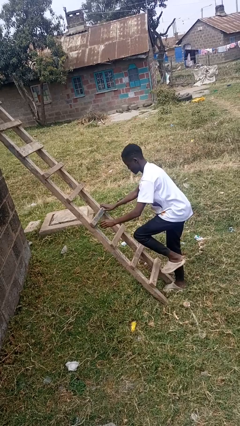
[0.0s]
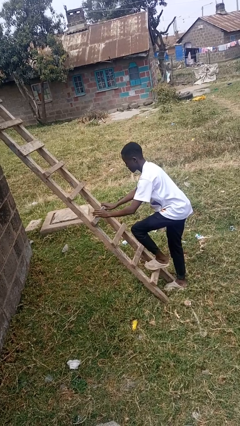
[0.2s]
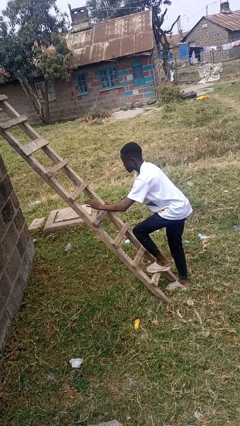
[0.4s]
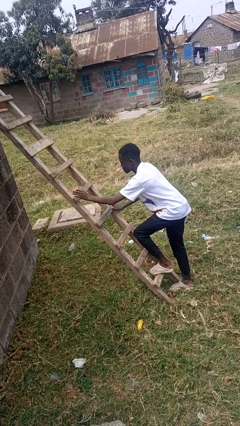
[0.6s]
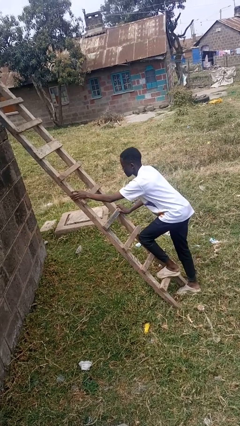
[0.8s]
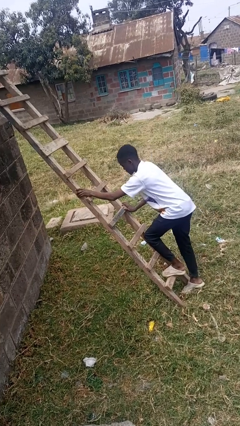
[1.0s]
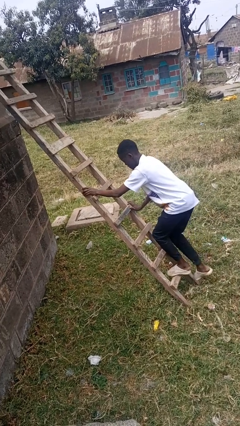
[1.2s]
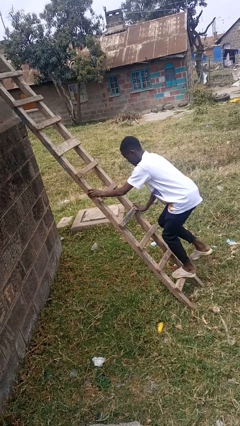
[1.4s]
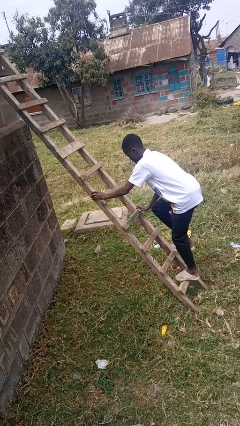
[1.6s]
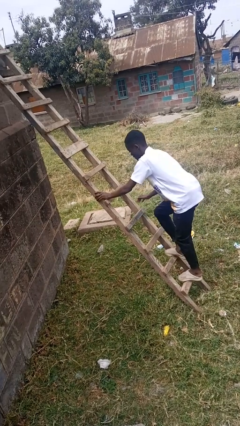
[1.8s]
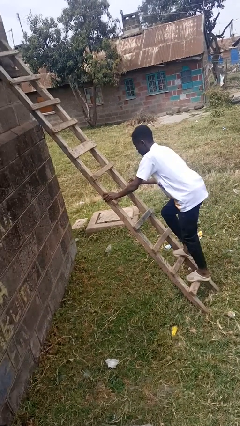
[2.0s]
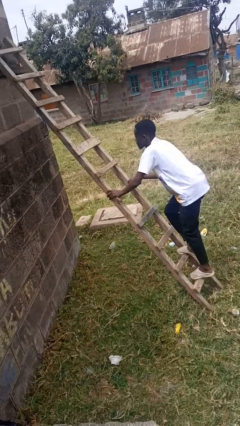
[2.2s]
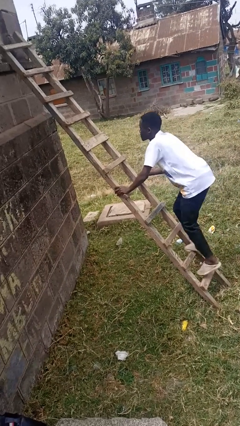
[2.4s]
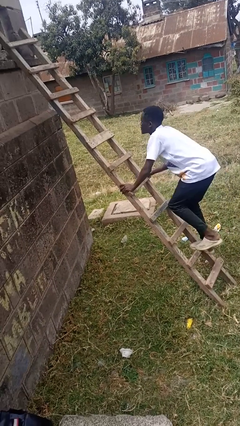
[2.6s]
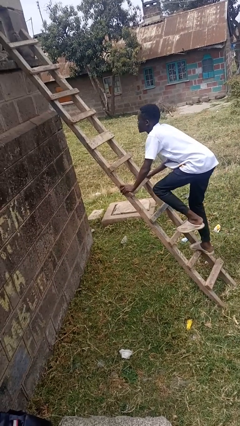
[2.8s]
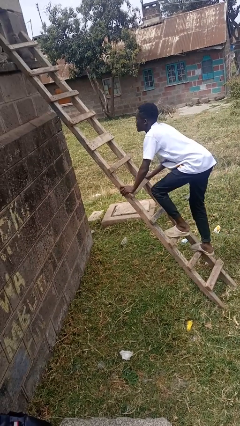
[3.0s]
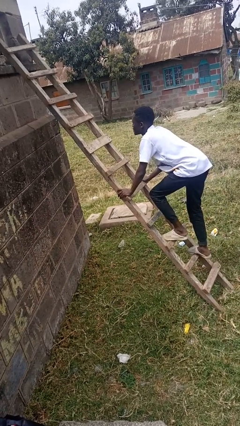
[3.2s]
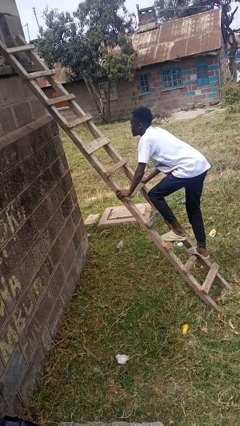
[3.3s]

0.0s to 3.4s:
person climbs up ladder

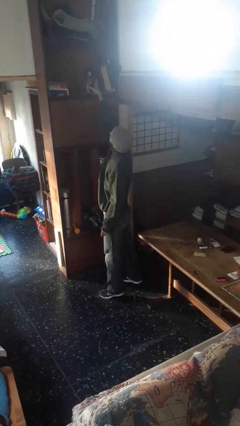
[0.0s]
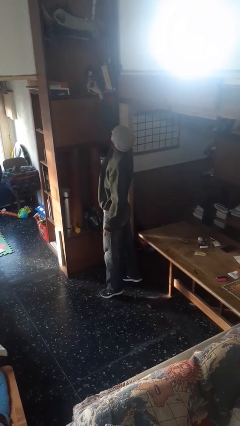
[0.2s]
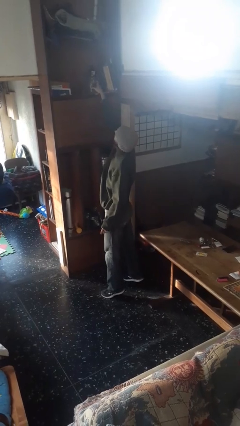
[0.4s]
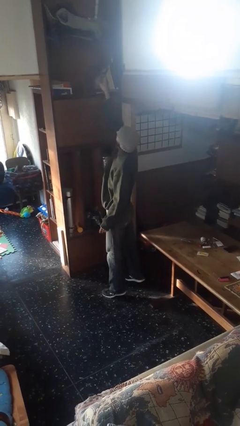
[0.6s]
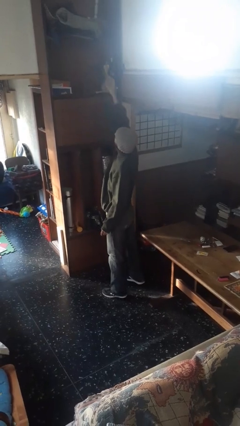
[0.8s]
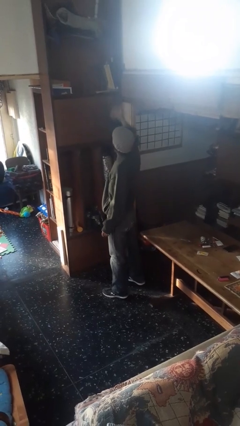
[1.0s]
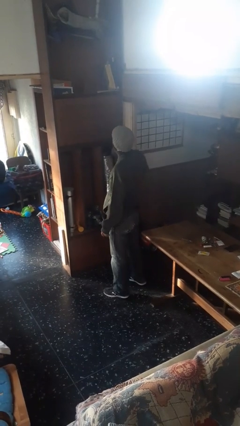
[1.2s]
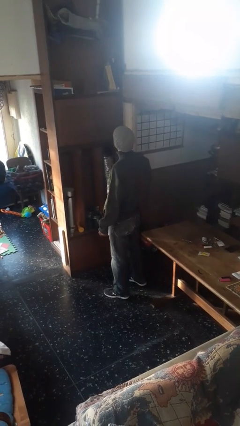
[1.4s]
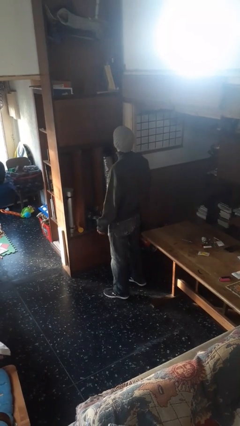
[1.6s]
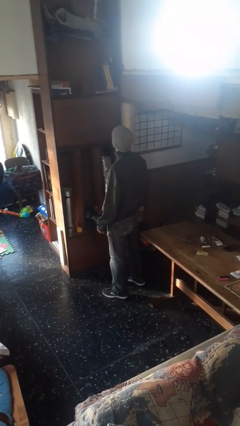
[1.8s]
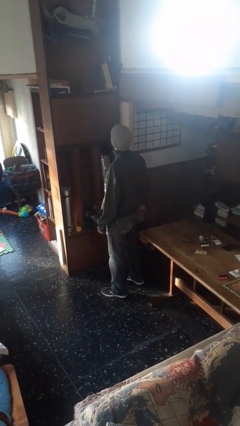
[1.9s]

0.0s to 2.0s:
person puts down object on shelf

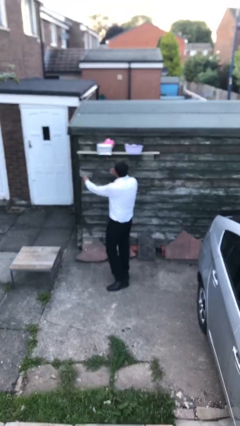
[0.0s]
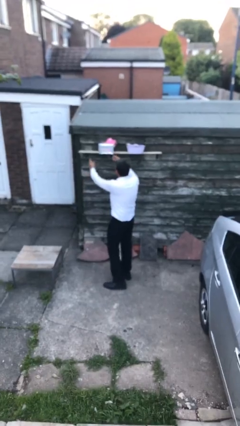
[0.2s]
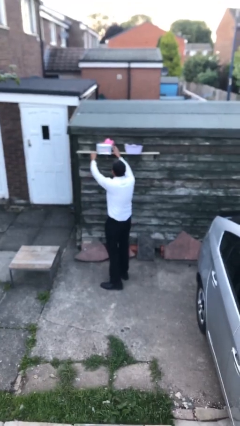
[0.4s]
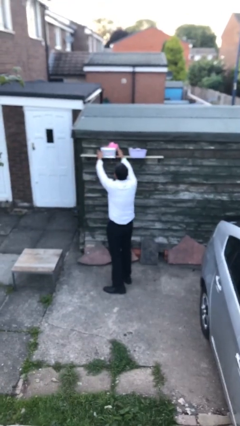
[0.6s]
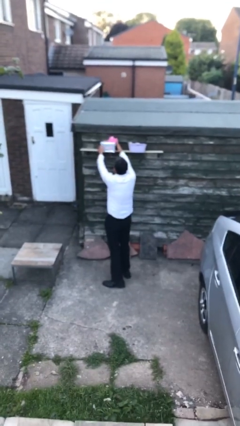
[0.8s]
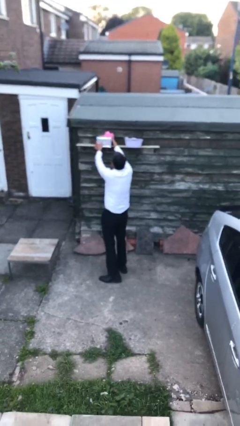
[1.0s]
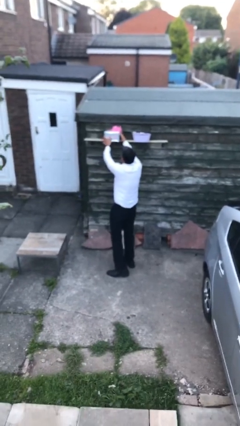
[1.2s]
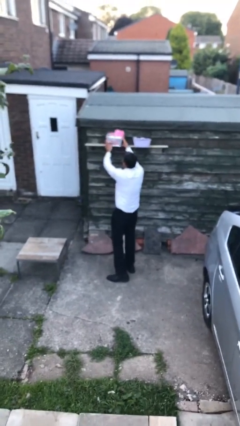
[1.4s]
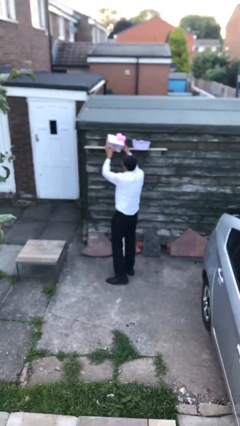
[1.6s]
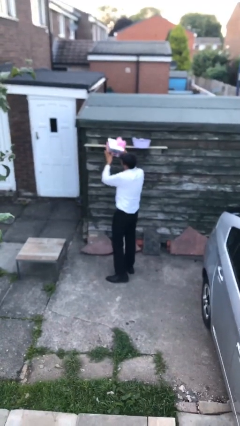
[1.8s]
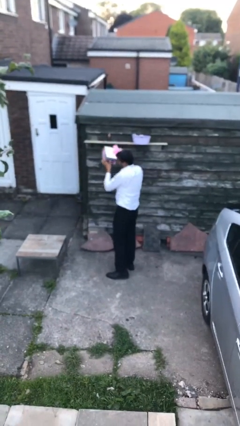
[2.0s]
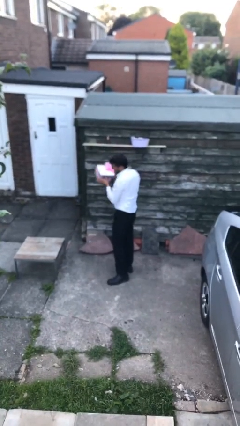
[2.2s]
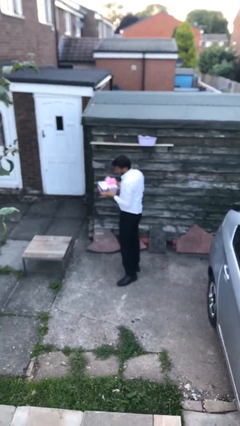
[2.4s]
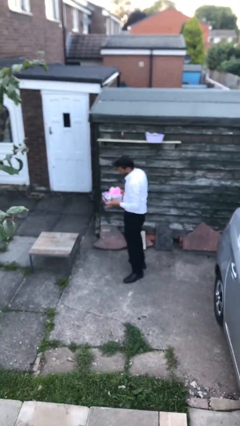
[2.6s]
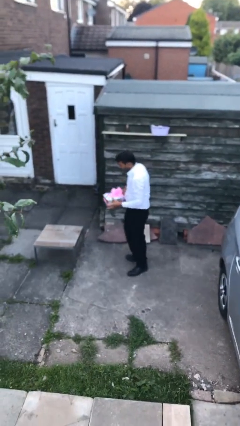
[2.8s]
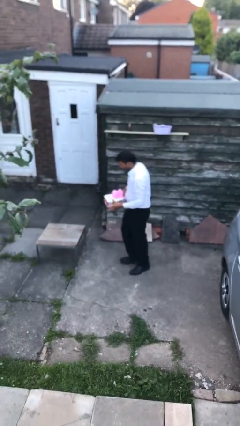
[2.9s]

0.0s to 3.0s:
person picks up object from shelf

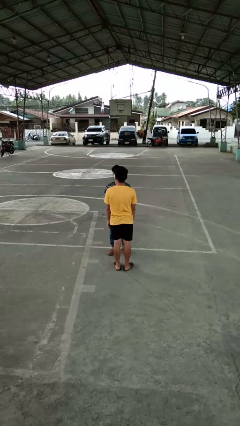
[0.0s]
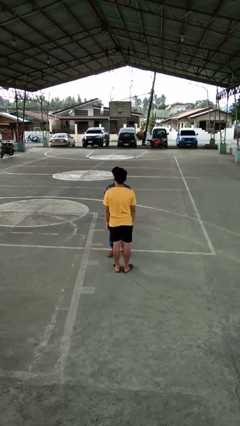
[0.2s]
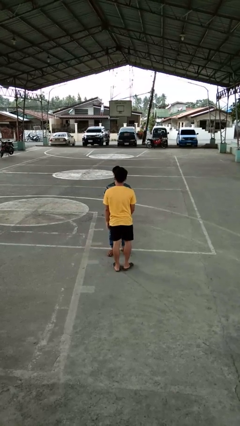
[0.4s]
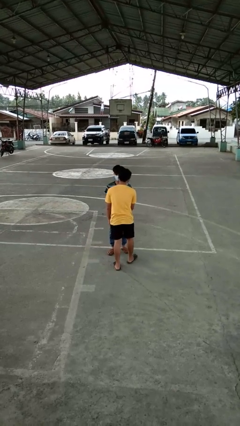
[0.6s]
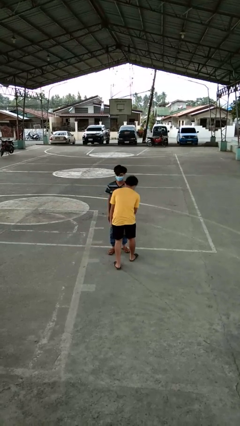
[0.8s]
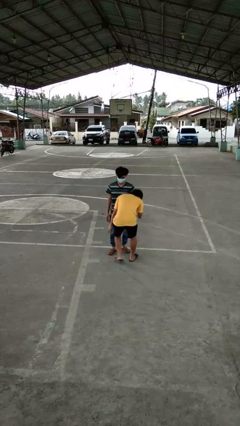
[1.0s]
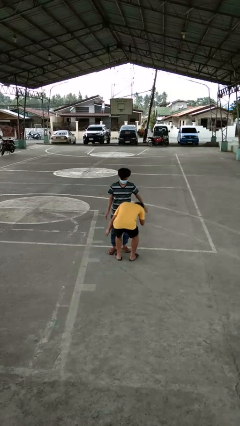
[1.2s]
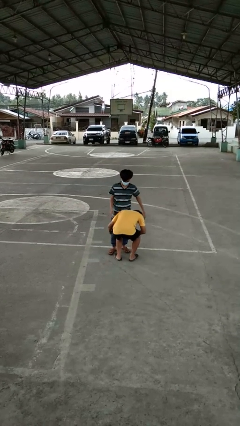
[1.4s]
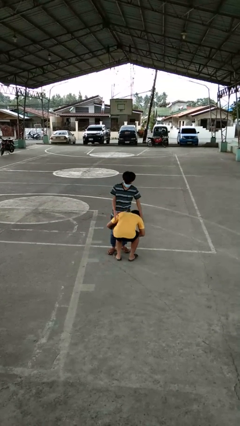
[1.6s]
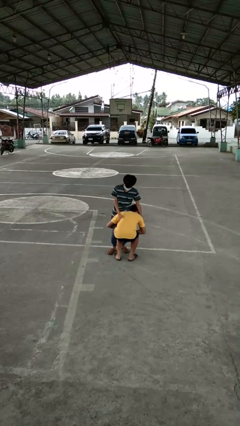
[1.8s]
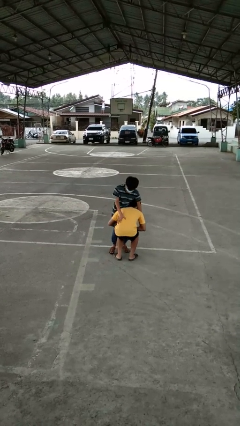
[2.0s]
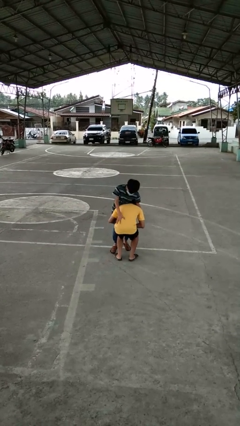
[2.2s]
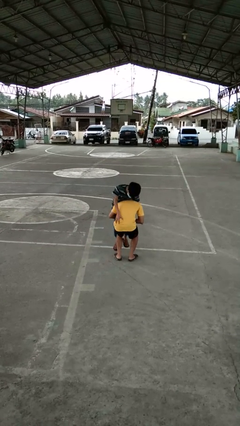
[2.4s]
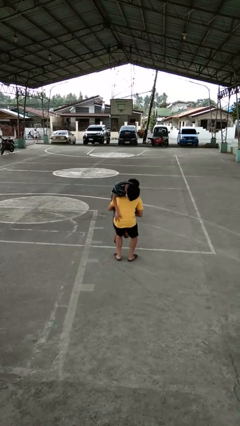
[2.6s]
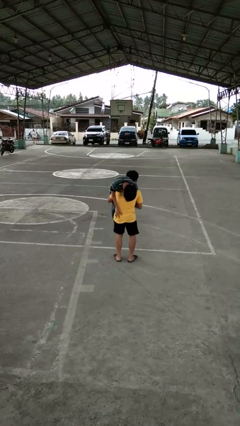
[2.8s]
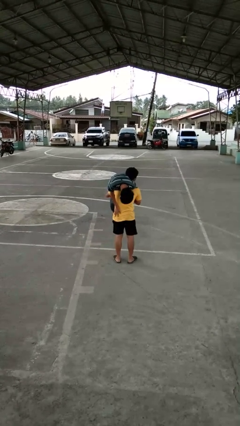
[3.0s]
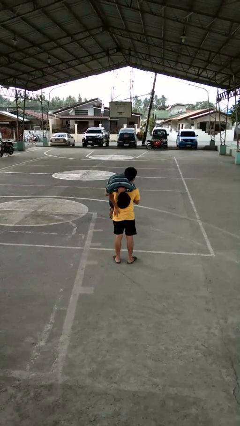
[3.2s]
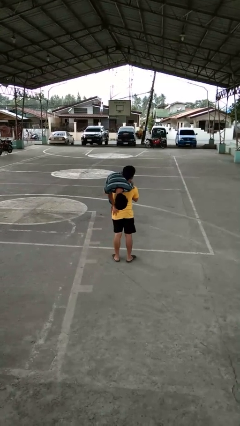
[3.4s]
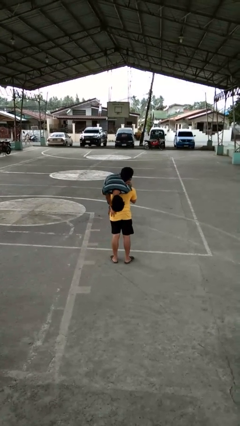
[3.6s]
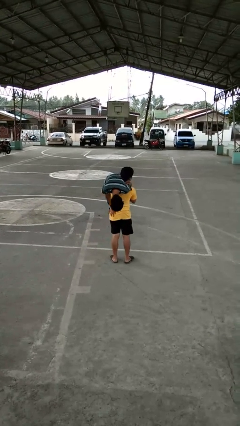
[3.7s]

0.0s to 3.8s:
person carries person over shoulder

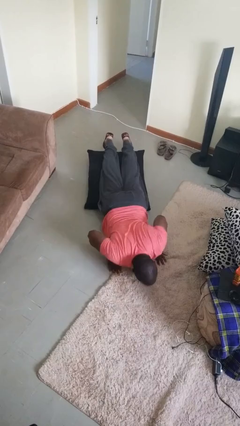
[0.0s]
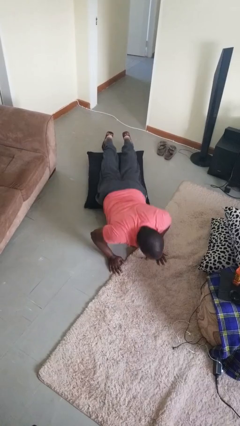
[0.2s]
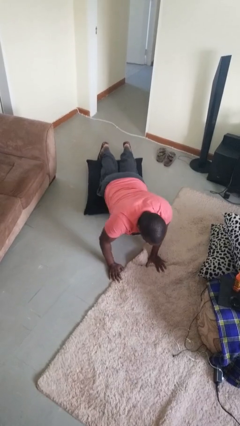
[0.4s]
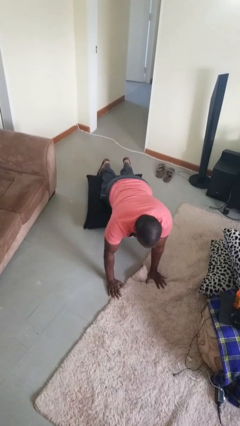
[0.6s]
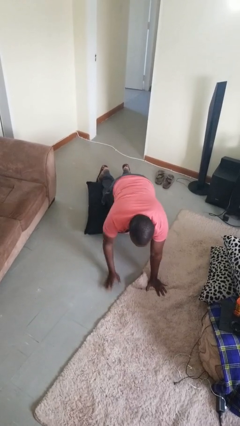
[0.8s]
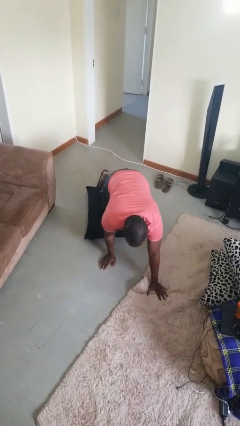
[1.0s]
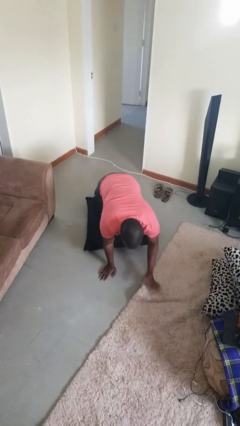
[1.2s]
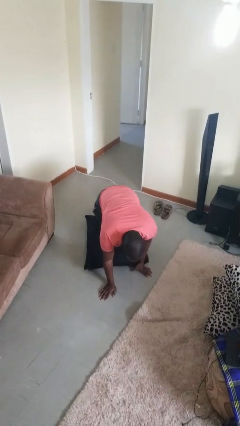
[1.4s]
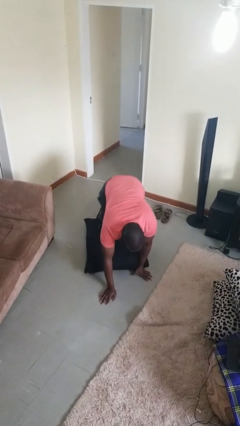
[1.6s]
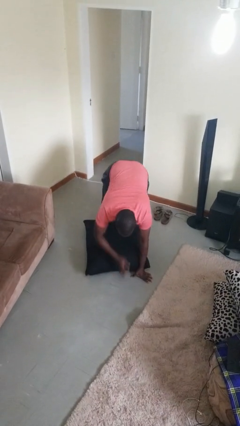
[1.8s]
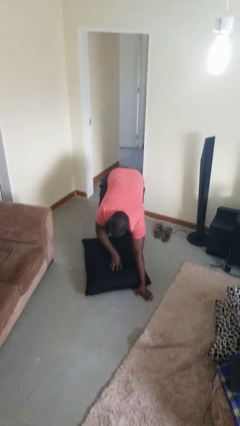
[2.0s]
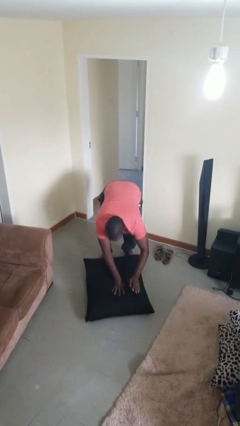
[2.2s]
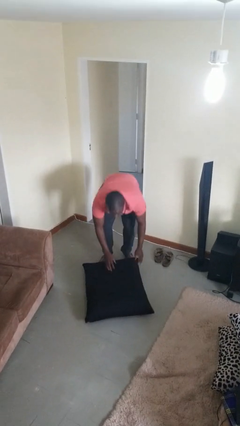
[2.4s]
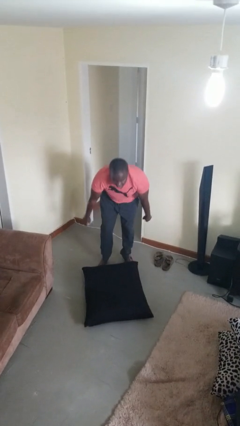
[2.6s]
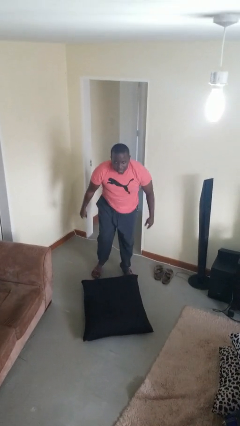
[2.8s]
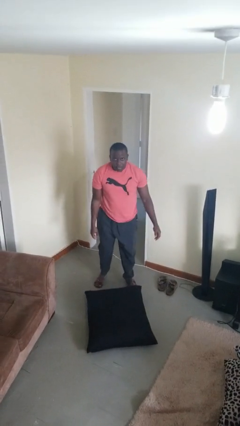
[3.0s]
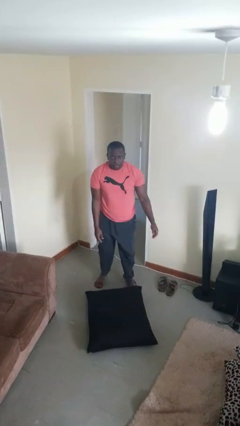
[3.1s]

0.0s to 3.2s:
person stands up from floor

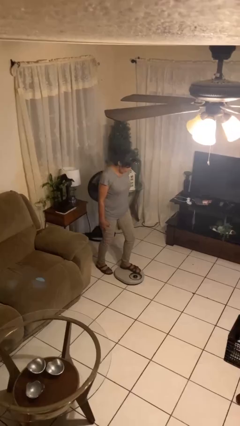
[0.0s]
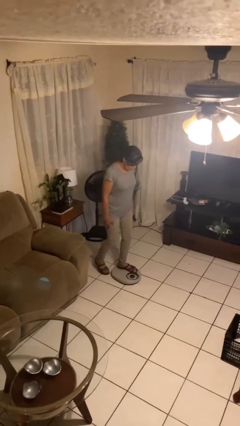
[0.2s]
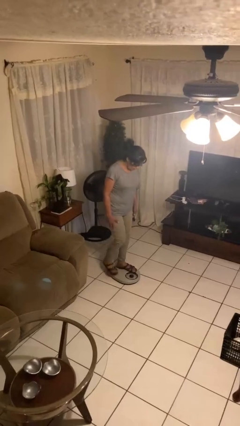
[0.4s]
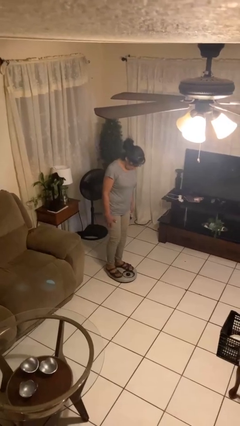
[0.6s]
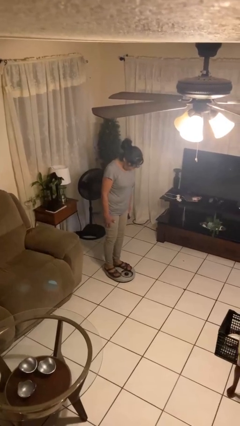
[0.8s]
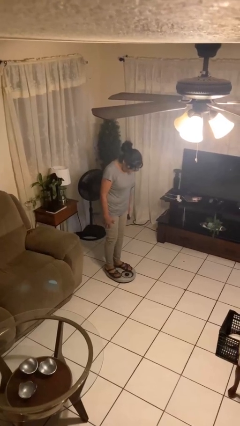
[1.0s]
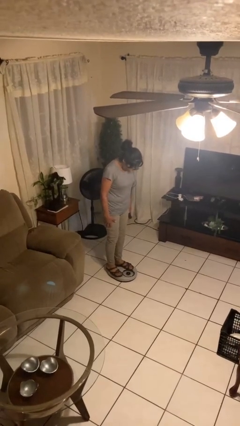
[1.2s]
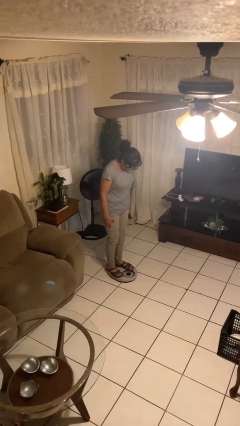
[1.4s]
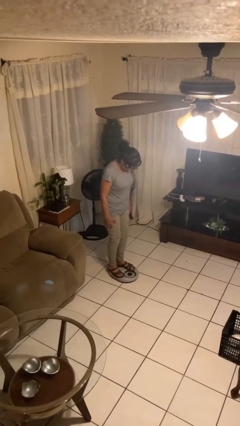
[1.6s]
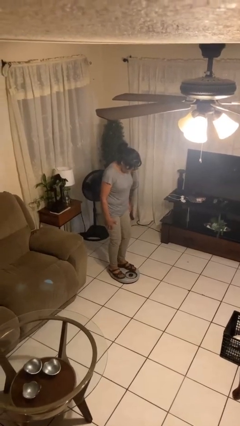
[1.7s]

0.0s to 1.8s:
person uses bodyweight scale

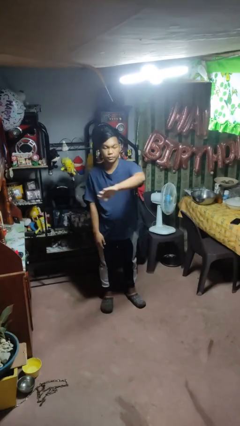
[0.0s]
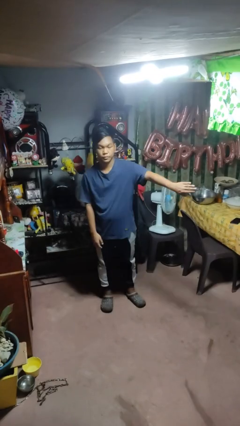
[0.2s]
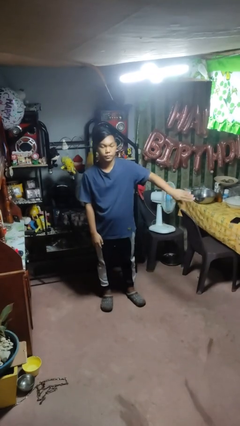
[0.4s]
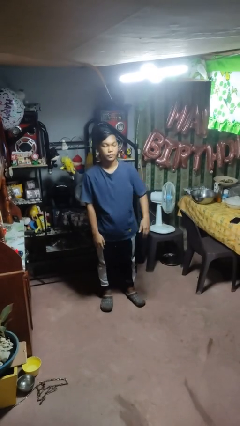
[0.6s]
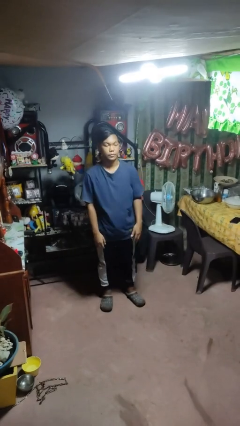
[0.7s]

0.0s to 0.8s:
person gestures swipe left
